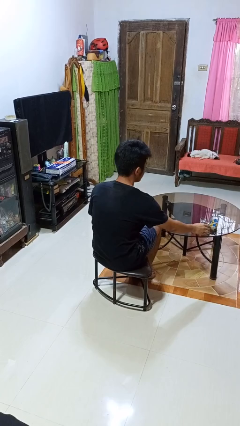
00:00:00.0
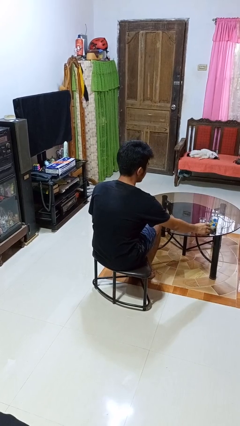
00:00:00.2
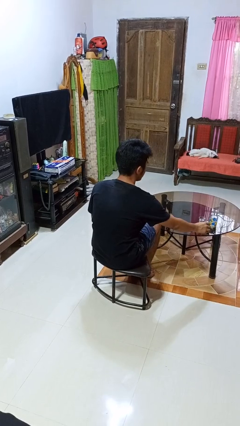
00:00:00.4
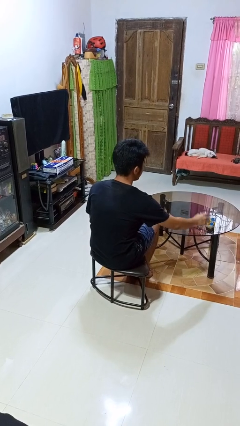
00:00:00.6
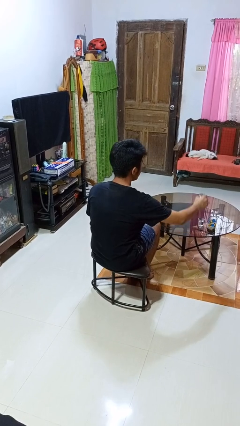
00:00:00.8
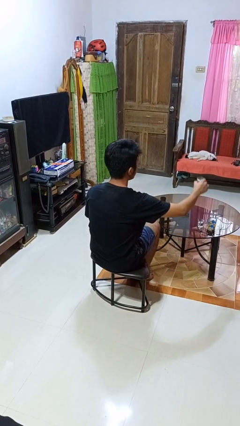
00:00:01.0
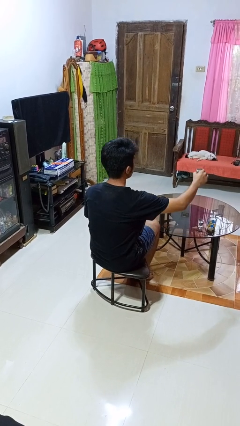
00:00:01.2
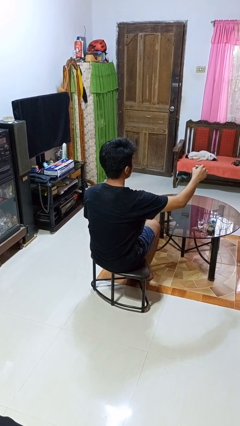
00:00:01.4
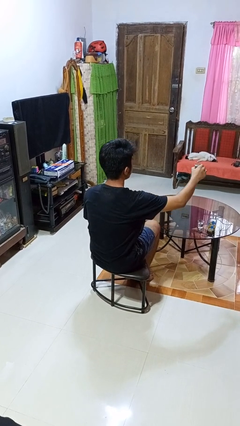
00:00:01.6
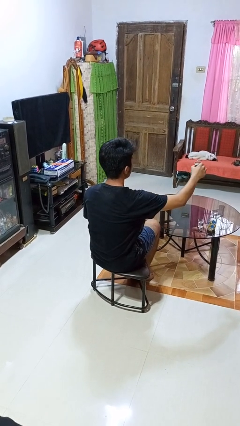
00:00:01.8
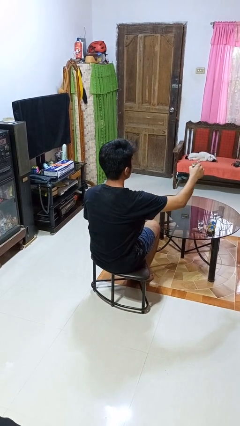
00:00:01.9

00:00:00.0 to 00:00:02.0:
person picks up object from table

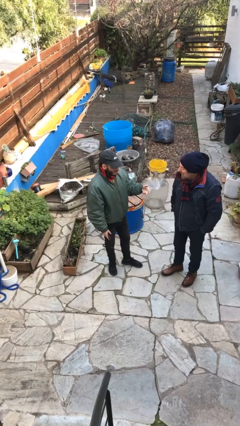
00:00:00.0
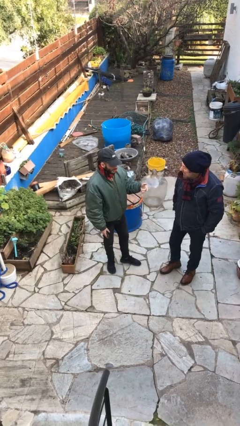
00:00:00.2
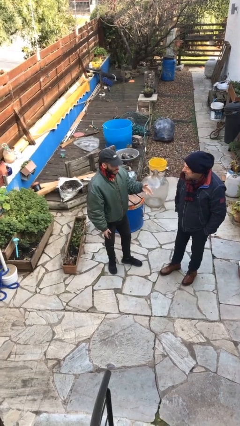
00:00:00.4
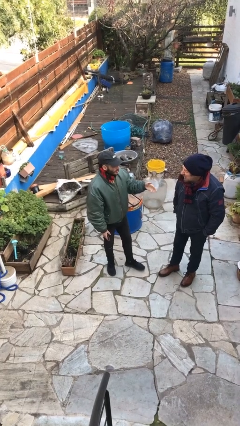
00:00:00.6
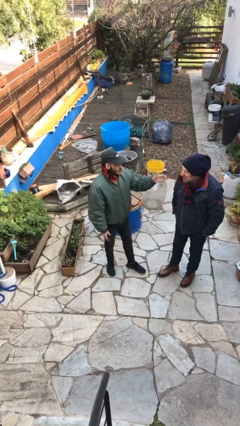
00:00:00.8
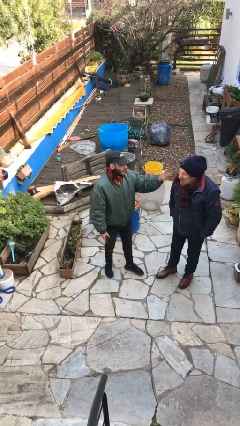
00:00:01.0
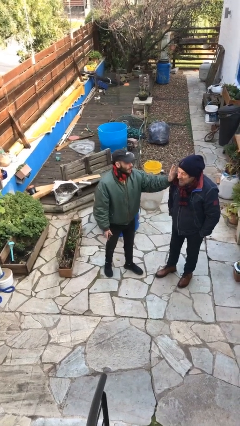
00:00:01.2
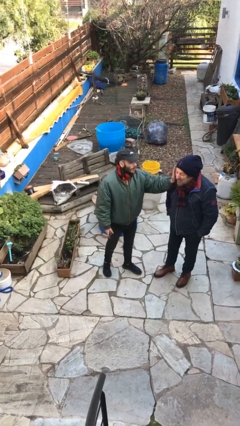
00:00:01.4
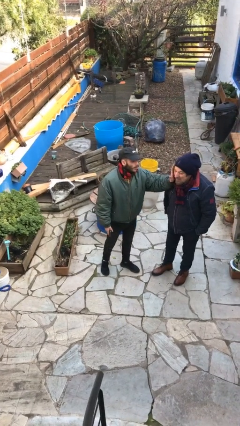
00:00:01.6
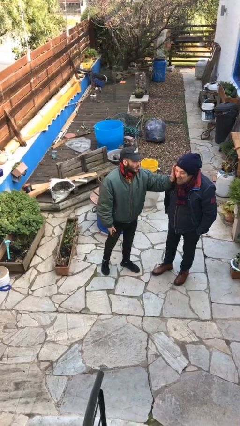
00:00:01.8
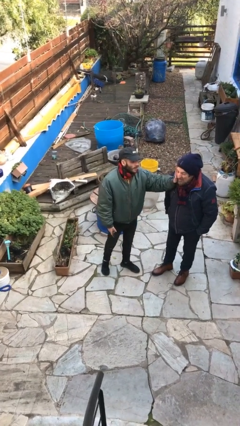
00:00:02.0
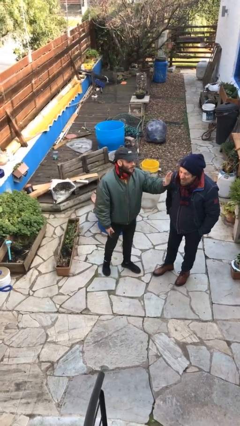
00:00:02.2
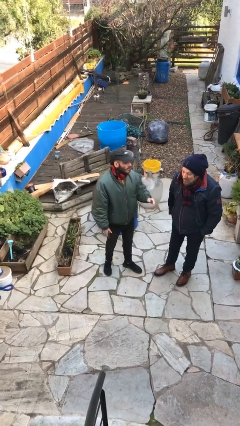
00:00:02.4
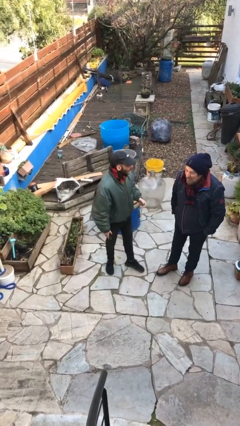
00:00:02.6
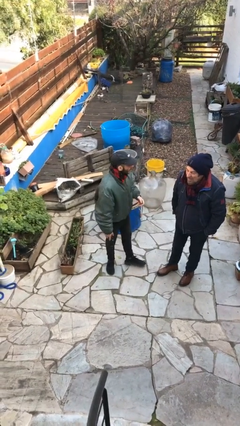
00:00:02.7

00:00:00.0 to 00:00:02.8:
person touches face of person

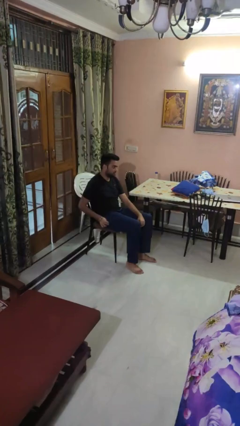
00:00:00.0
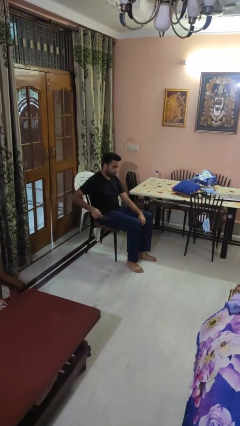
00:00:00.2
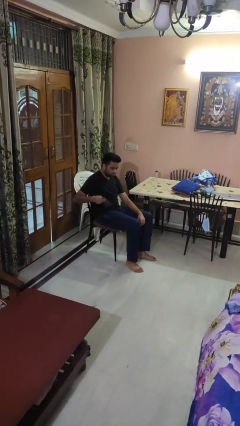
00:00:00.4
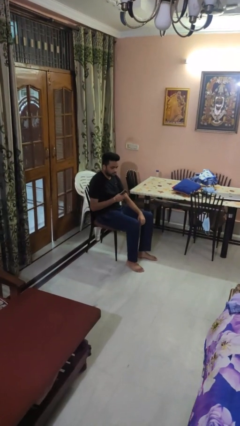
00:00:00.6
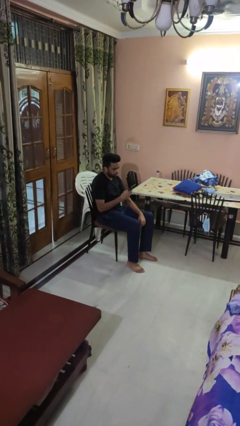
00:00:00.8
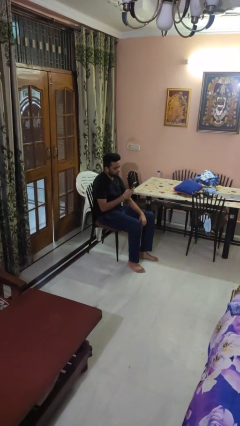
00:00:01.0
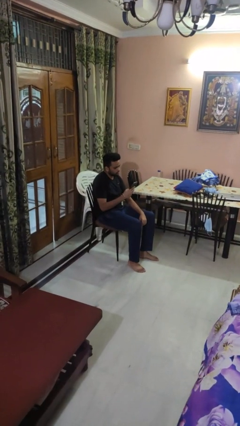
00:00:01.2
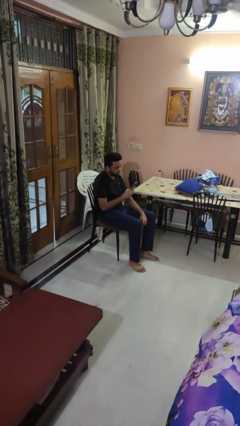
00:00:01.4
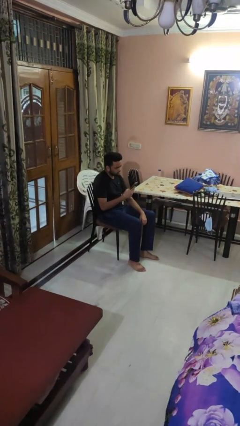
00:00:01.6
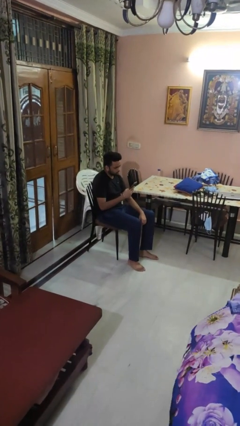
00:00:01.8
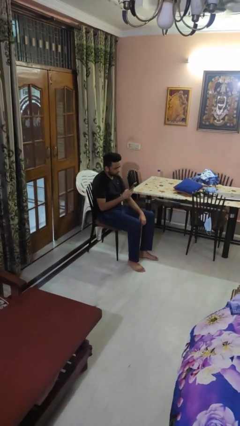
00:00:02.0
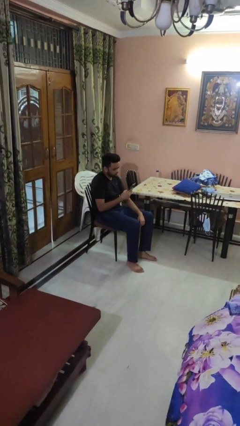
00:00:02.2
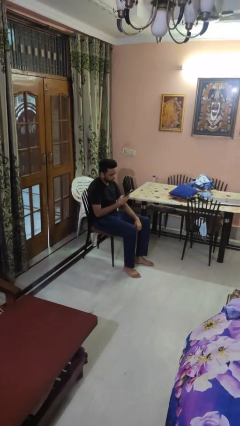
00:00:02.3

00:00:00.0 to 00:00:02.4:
person takes phone from pocket

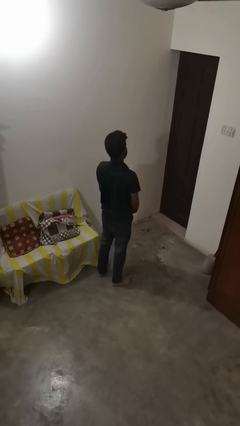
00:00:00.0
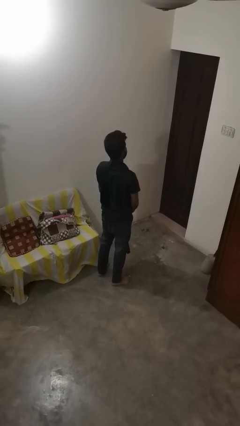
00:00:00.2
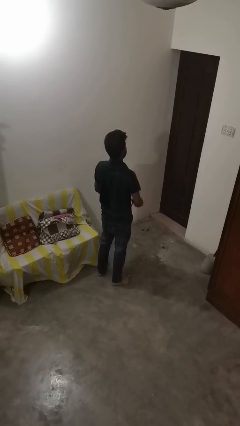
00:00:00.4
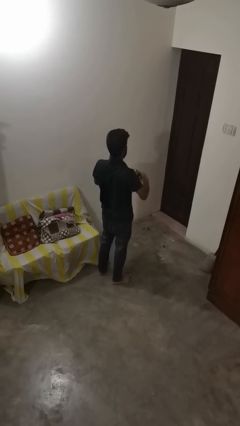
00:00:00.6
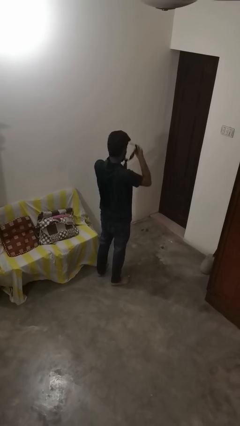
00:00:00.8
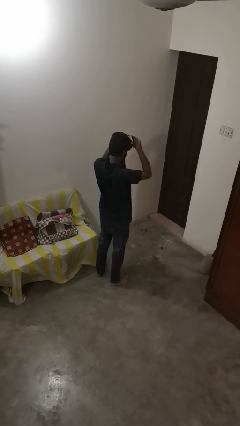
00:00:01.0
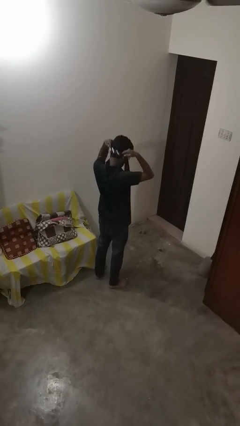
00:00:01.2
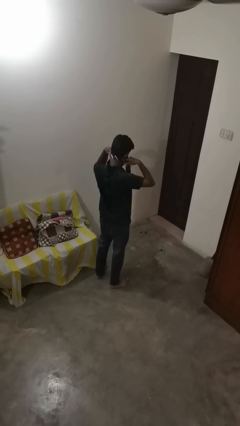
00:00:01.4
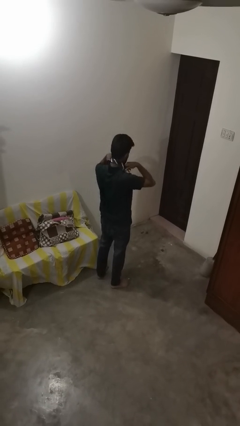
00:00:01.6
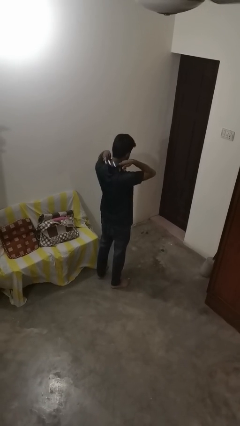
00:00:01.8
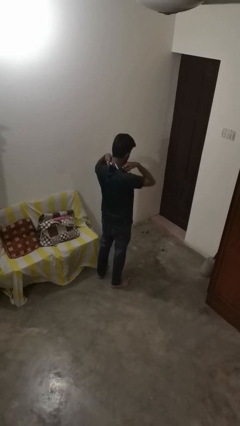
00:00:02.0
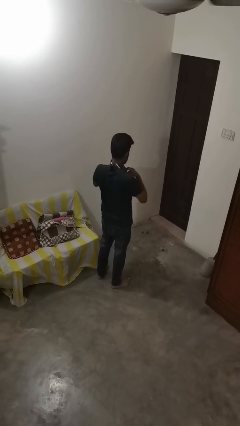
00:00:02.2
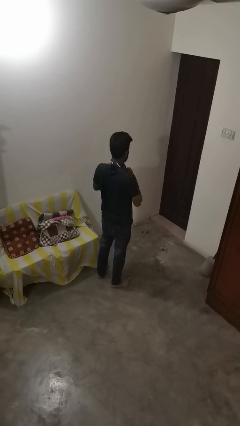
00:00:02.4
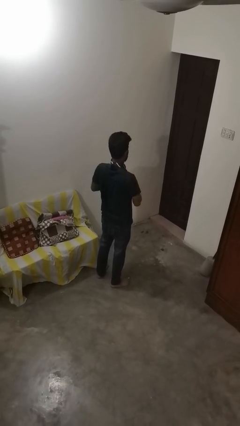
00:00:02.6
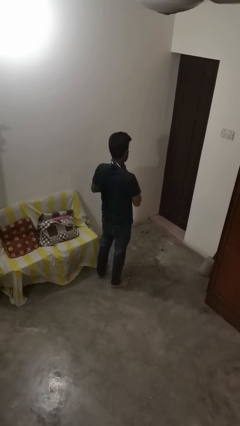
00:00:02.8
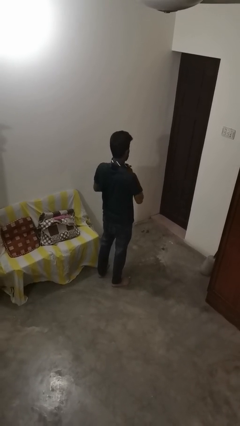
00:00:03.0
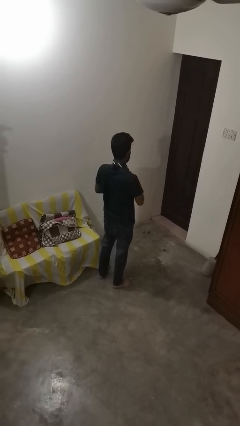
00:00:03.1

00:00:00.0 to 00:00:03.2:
person puts on necktie

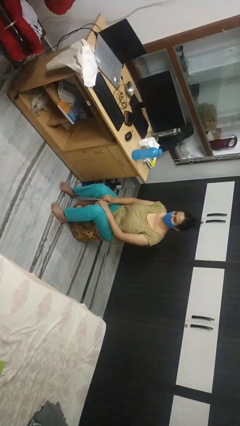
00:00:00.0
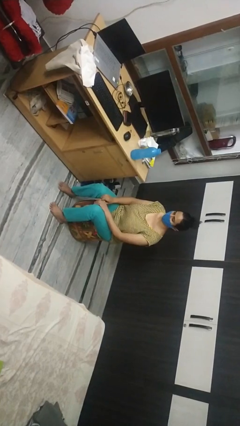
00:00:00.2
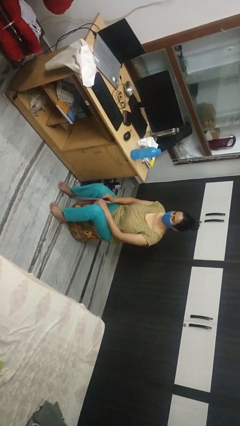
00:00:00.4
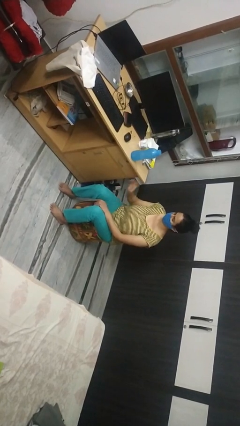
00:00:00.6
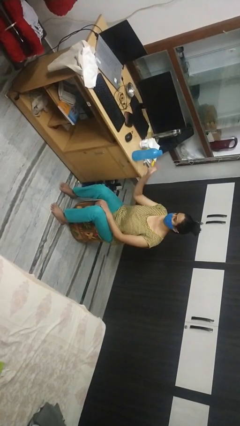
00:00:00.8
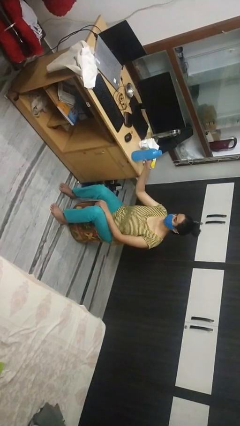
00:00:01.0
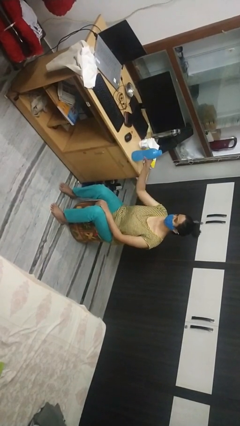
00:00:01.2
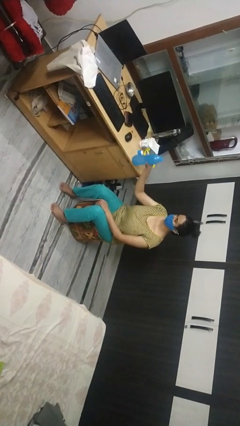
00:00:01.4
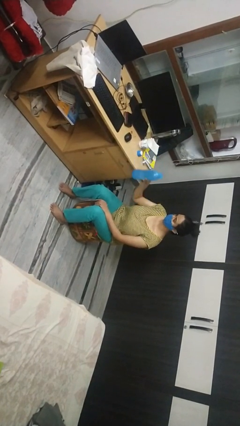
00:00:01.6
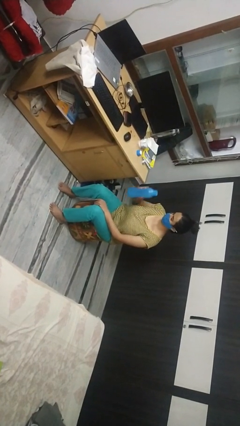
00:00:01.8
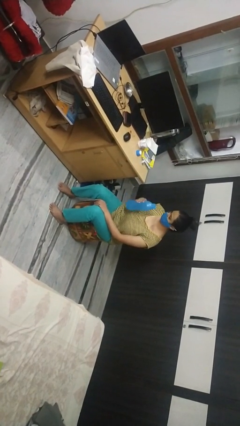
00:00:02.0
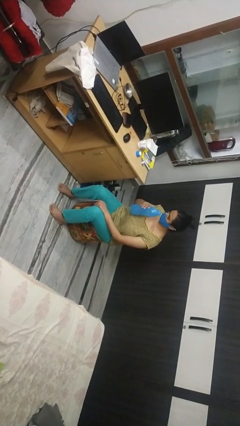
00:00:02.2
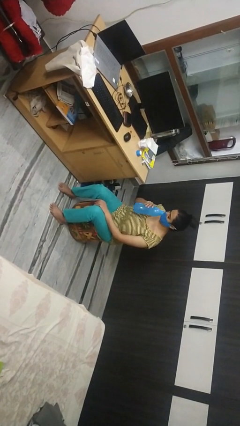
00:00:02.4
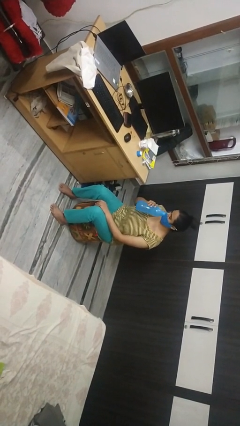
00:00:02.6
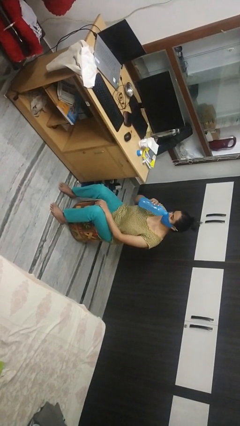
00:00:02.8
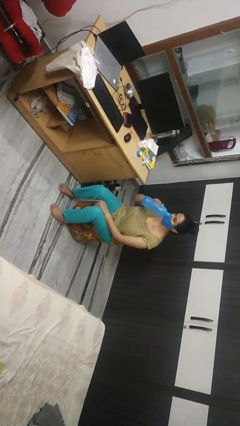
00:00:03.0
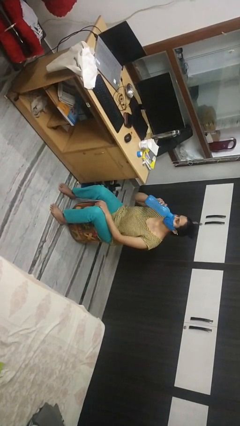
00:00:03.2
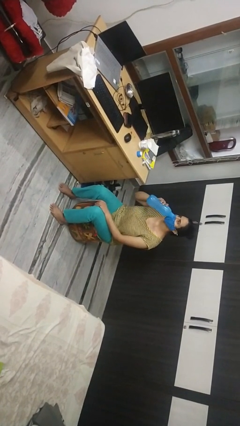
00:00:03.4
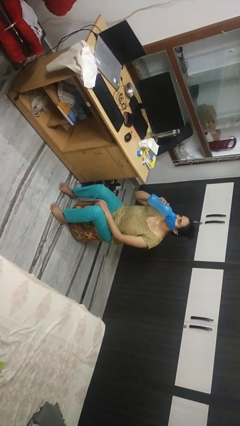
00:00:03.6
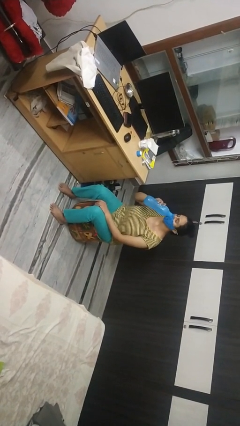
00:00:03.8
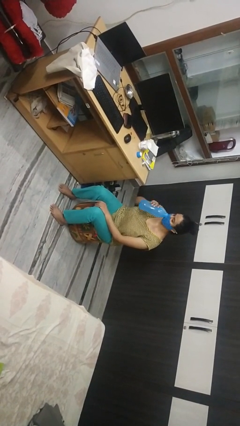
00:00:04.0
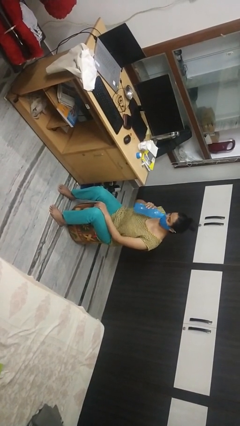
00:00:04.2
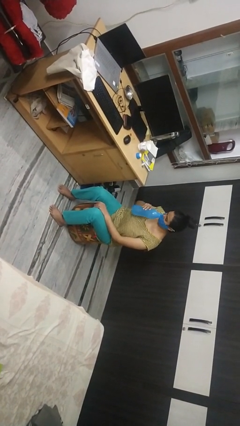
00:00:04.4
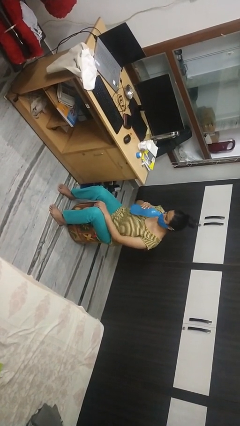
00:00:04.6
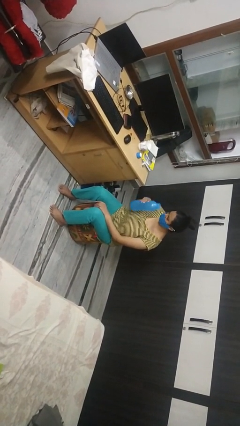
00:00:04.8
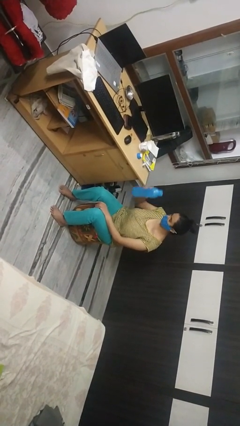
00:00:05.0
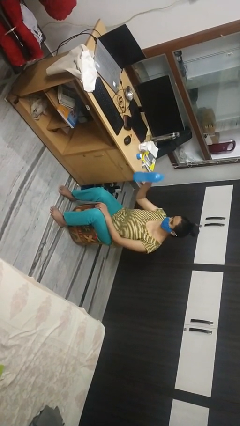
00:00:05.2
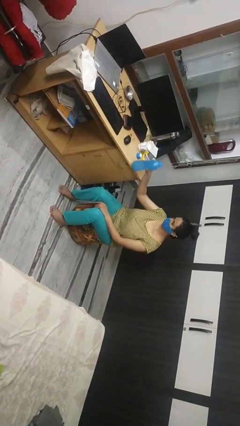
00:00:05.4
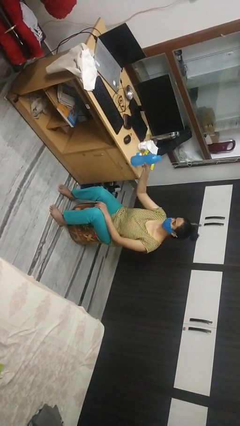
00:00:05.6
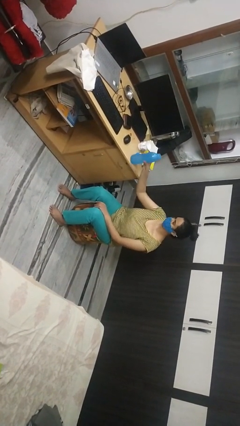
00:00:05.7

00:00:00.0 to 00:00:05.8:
person drinks from bottle

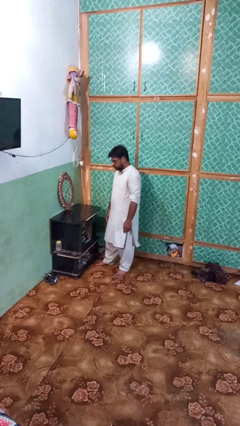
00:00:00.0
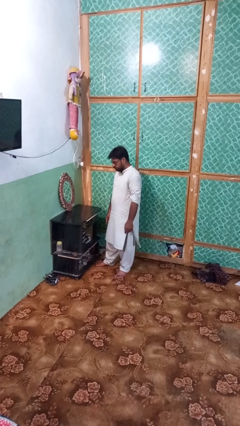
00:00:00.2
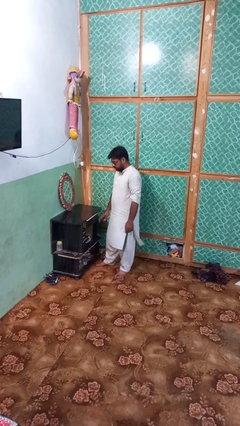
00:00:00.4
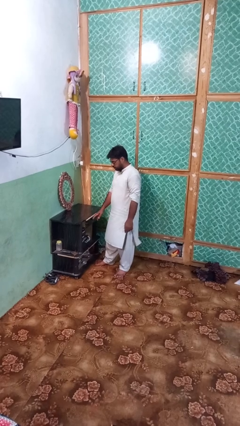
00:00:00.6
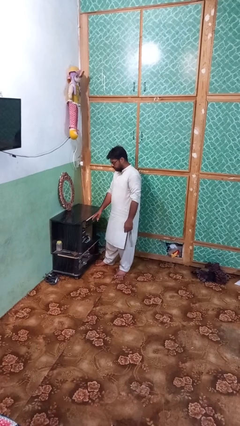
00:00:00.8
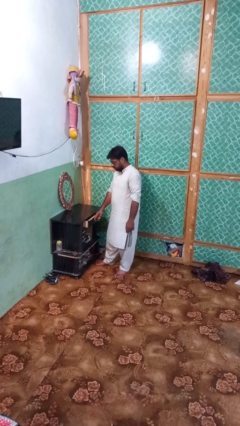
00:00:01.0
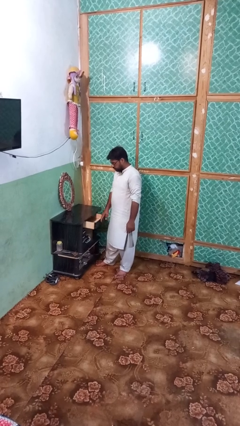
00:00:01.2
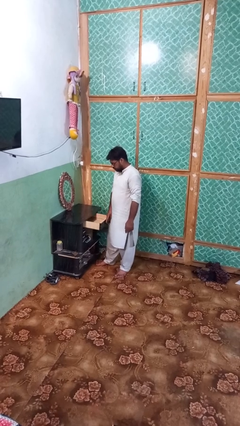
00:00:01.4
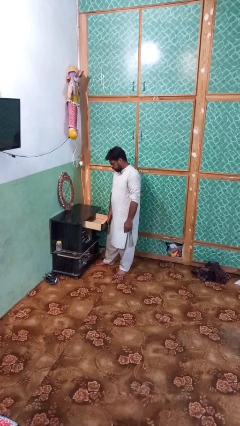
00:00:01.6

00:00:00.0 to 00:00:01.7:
person opens dresser drawer
